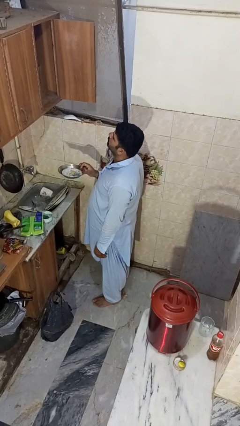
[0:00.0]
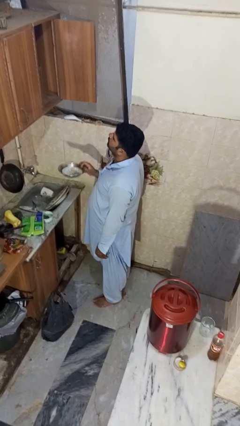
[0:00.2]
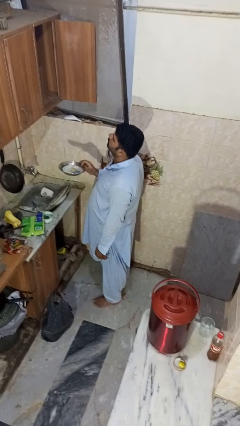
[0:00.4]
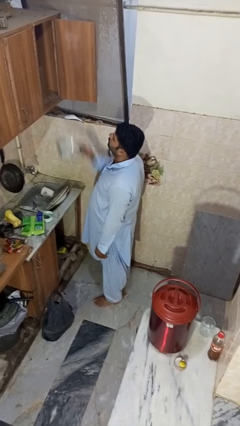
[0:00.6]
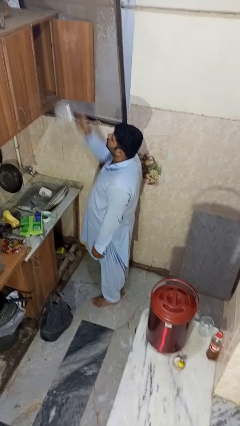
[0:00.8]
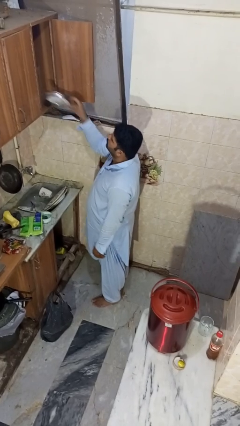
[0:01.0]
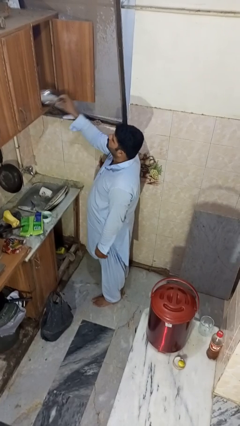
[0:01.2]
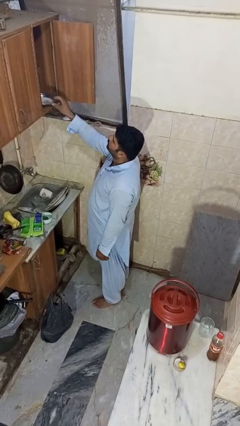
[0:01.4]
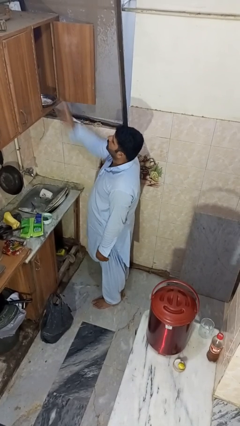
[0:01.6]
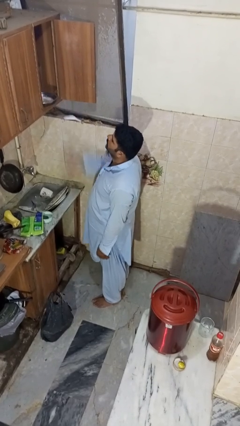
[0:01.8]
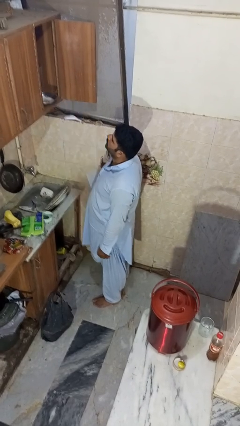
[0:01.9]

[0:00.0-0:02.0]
person puts object in cabinet

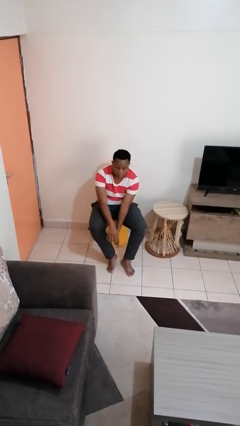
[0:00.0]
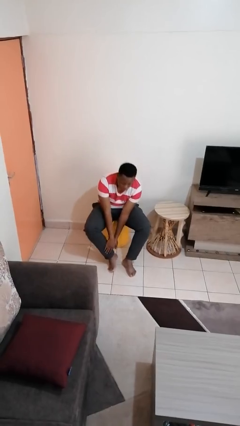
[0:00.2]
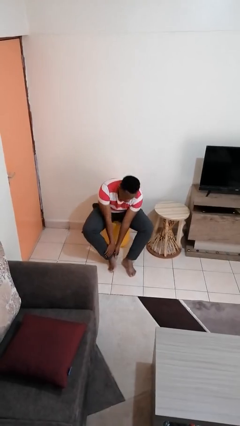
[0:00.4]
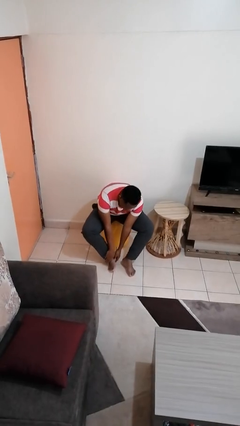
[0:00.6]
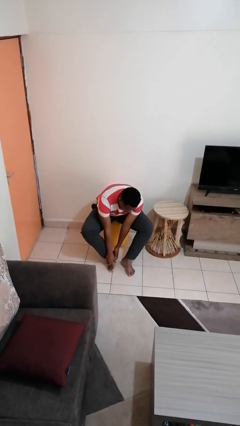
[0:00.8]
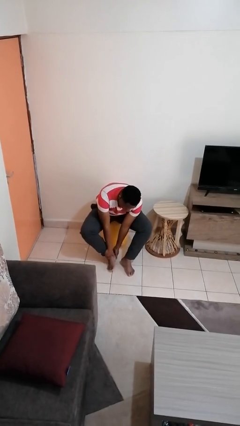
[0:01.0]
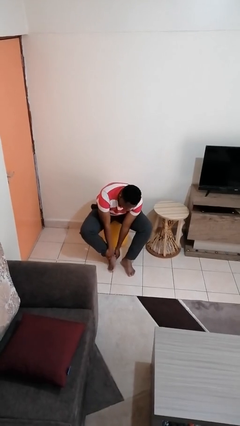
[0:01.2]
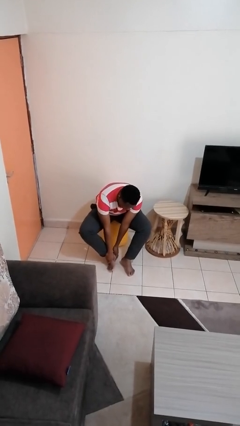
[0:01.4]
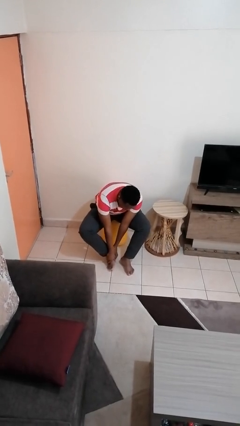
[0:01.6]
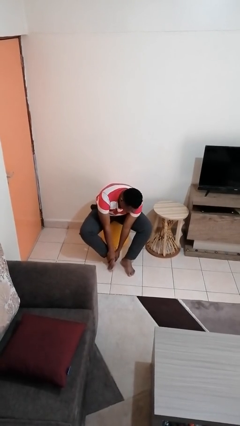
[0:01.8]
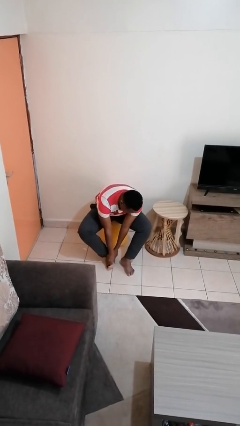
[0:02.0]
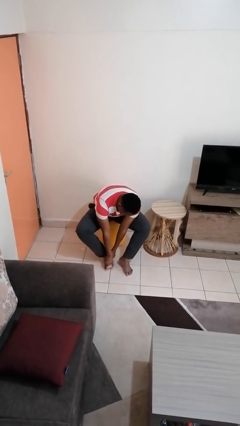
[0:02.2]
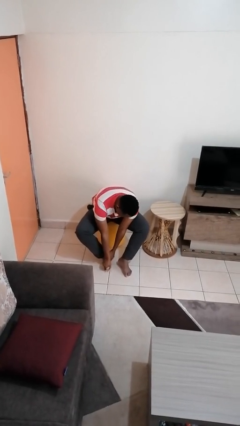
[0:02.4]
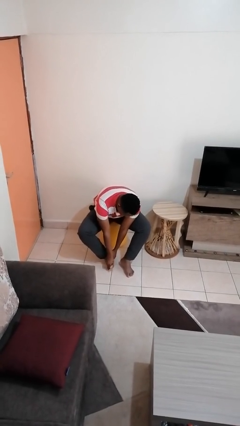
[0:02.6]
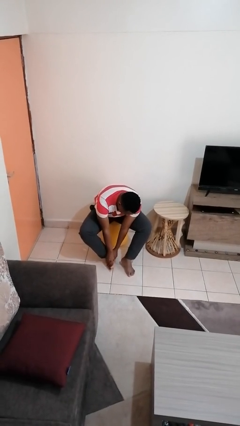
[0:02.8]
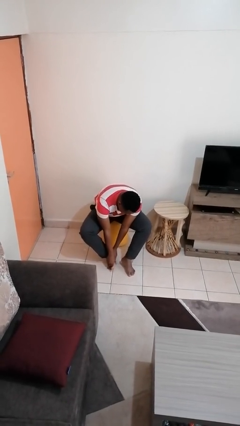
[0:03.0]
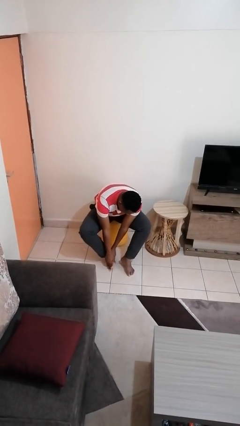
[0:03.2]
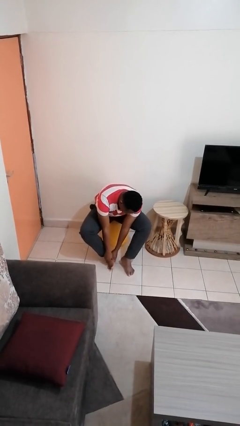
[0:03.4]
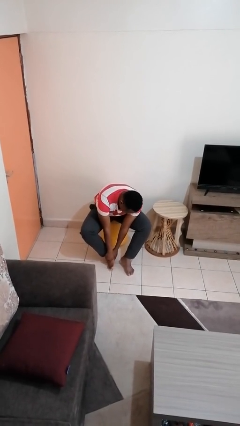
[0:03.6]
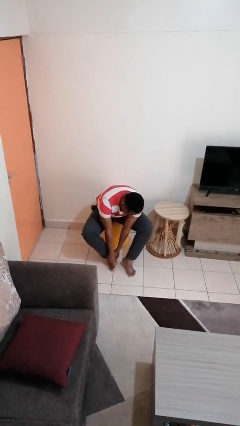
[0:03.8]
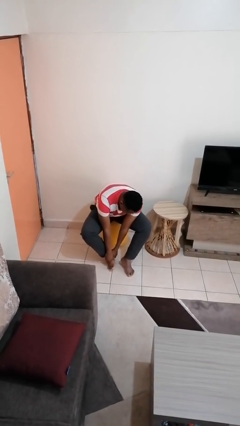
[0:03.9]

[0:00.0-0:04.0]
person rubs foot

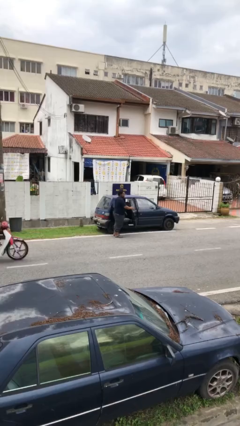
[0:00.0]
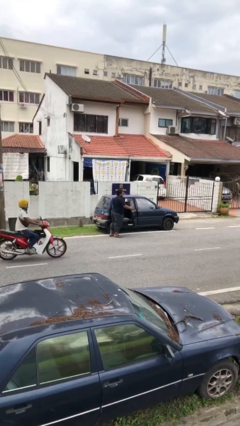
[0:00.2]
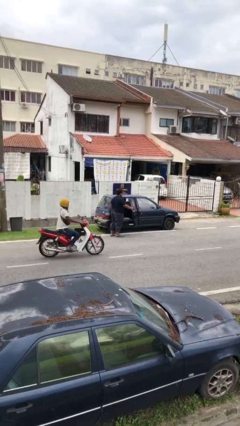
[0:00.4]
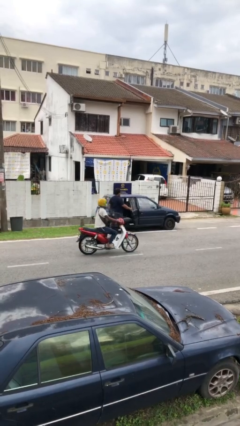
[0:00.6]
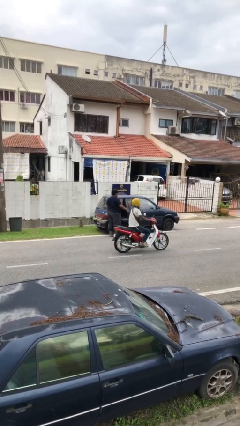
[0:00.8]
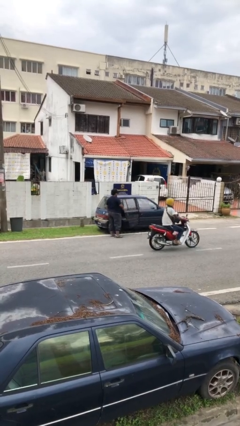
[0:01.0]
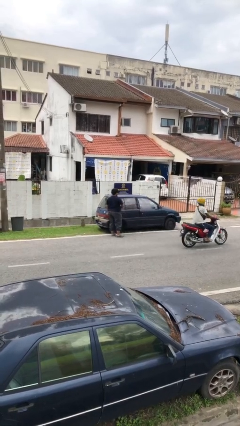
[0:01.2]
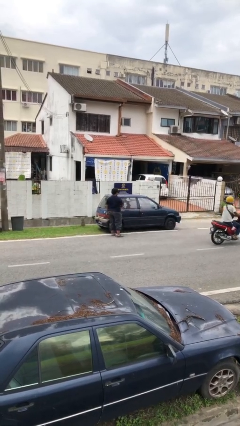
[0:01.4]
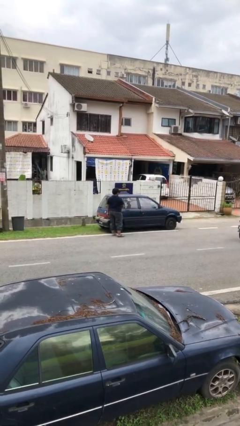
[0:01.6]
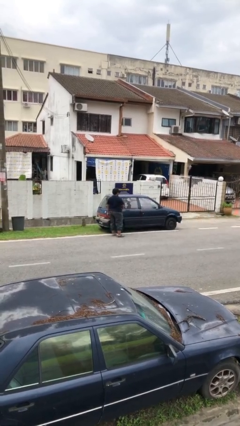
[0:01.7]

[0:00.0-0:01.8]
person closes car door

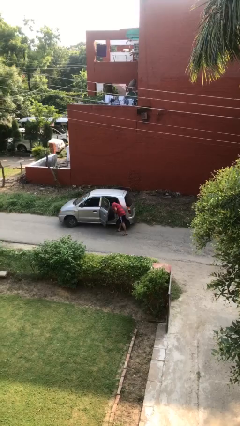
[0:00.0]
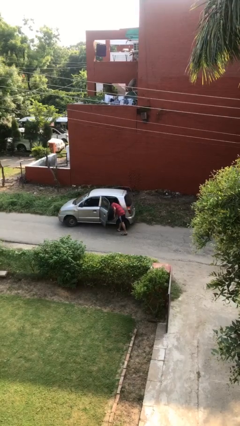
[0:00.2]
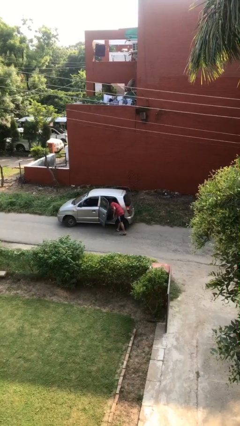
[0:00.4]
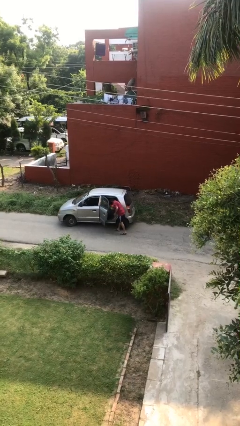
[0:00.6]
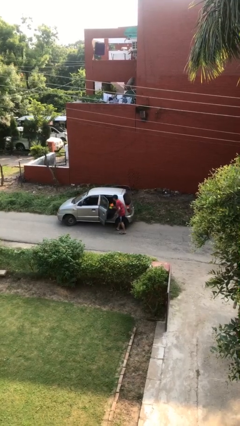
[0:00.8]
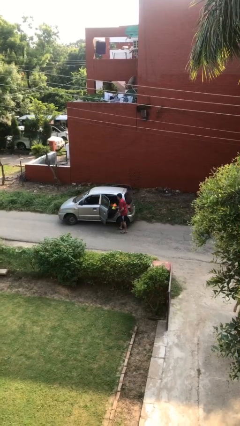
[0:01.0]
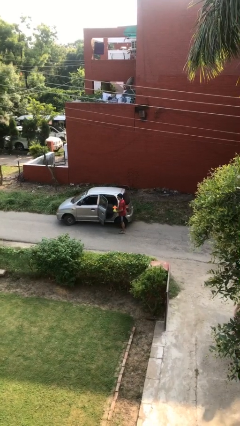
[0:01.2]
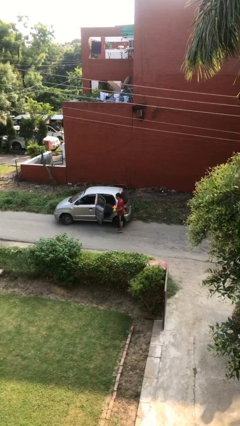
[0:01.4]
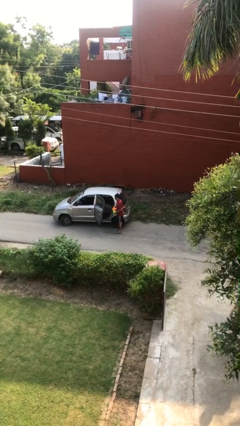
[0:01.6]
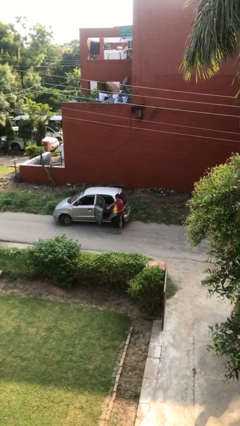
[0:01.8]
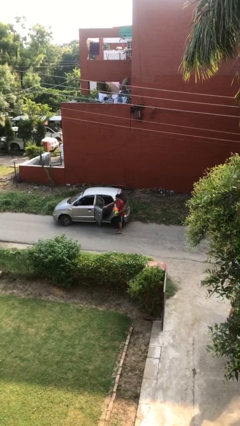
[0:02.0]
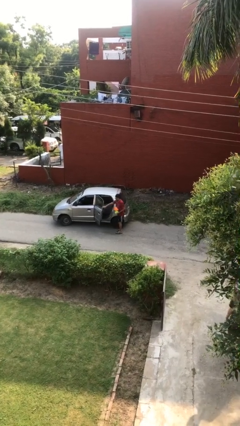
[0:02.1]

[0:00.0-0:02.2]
person unloads car

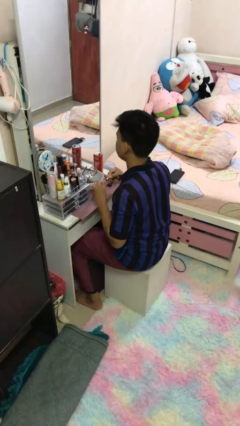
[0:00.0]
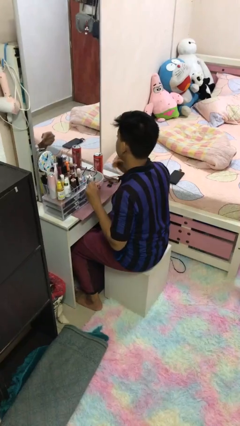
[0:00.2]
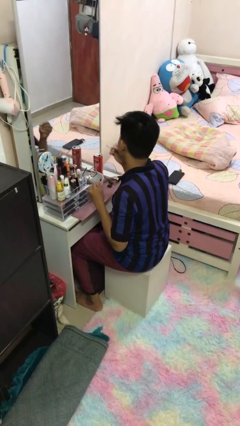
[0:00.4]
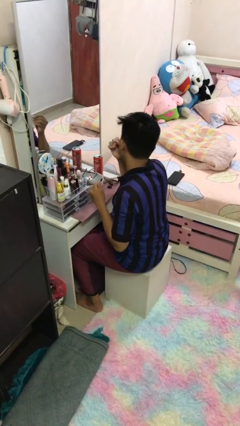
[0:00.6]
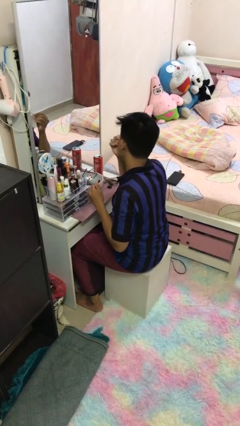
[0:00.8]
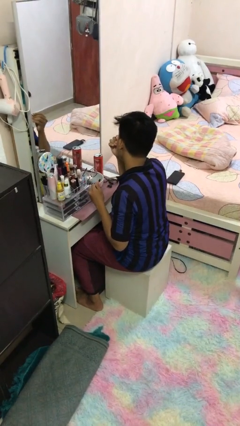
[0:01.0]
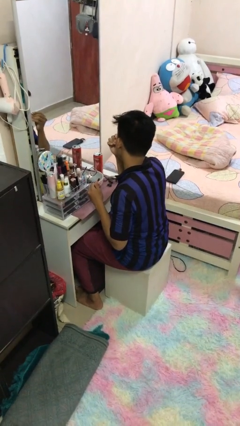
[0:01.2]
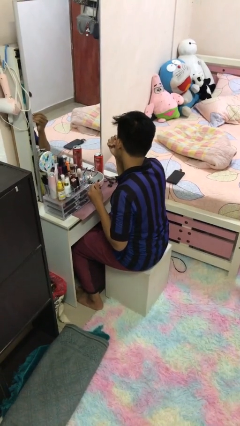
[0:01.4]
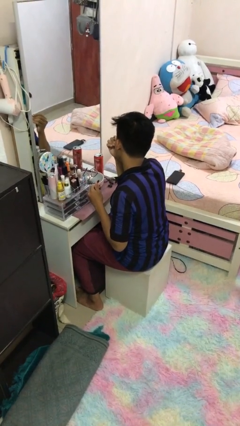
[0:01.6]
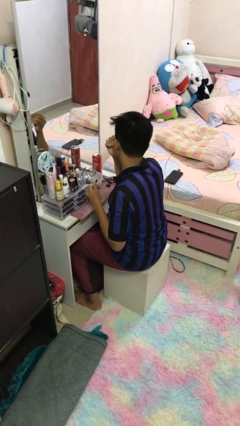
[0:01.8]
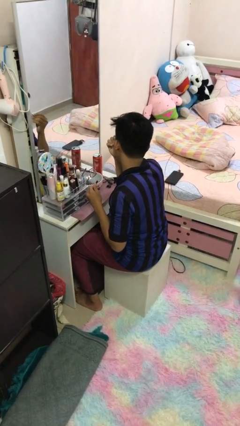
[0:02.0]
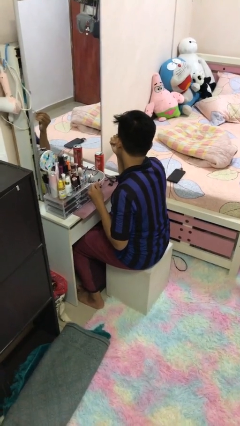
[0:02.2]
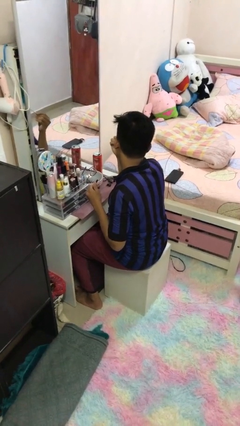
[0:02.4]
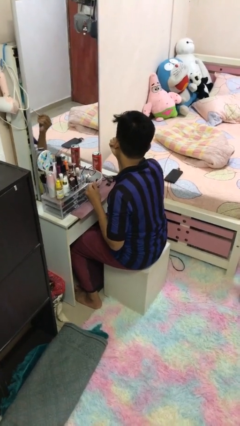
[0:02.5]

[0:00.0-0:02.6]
person applies eye makeup

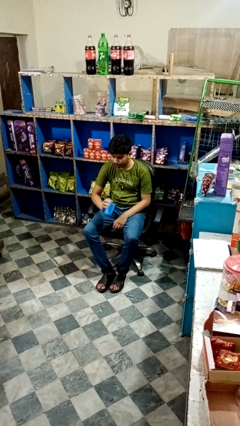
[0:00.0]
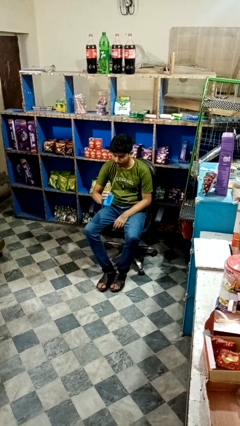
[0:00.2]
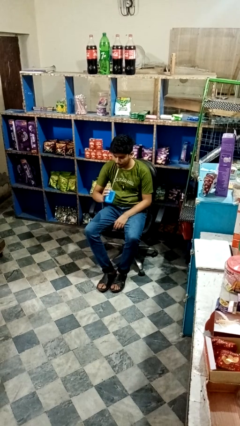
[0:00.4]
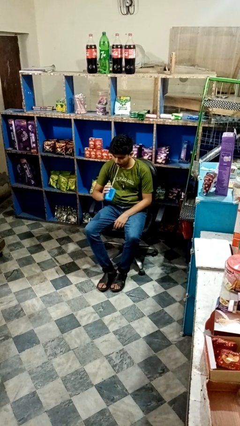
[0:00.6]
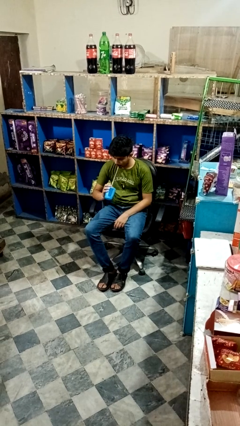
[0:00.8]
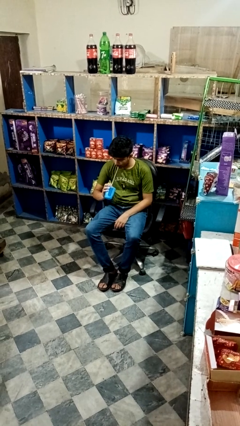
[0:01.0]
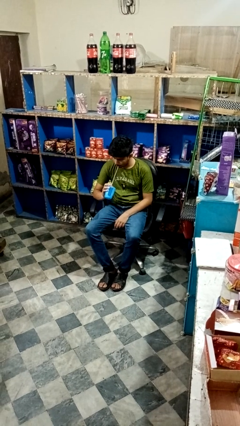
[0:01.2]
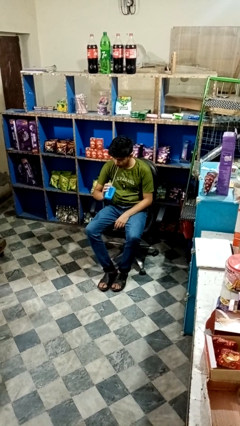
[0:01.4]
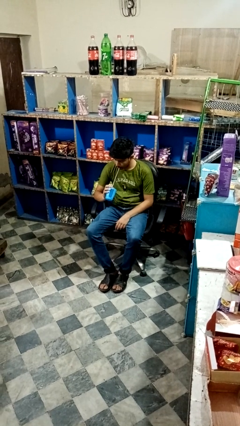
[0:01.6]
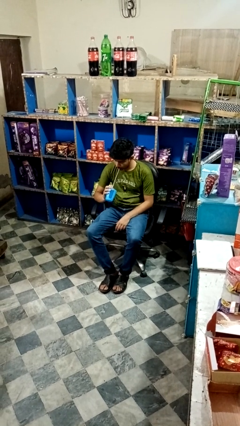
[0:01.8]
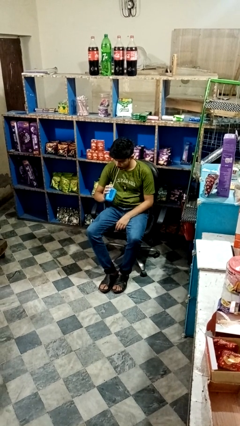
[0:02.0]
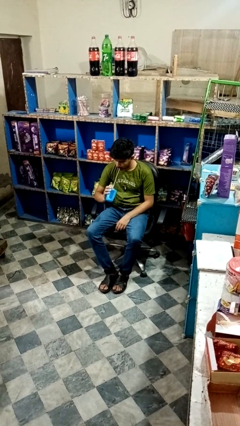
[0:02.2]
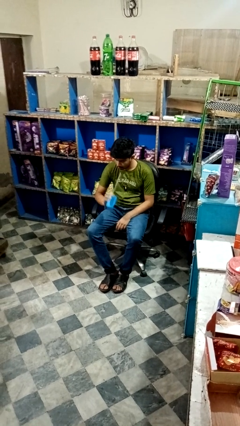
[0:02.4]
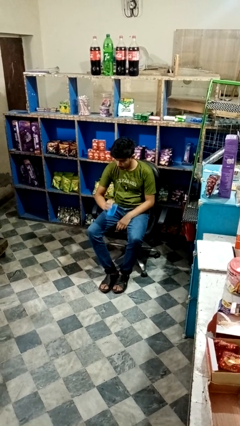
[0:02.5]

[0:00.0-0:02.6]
person drinks from straw

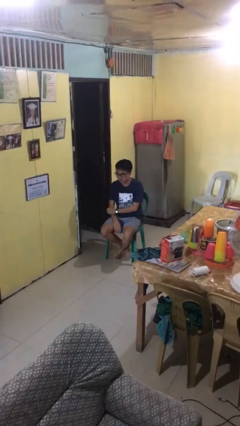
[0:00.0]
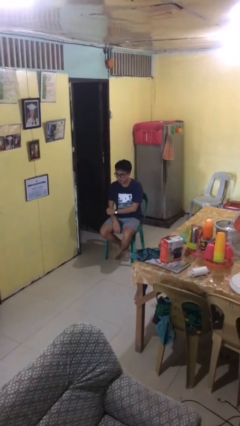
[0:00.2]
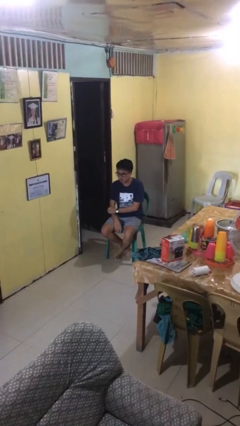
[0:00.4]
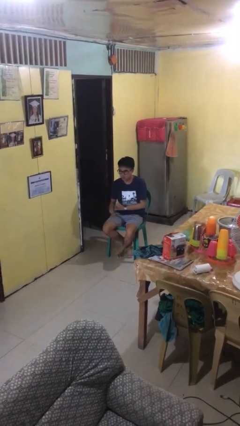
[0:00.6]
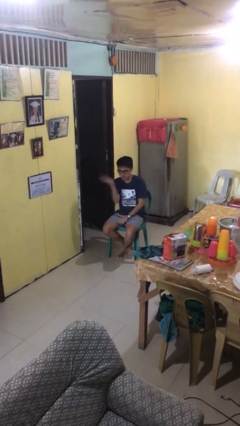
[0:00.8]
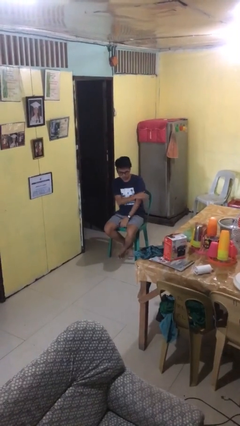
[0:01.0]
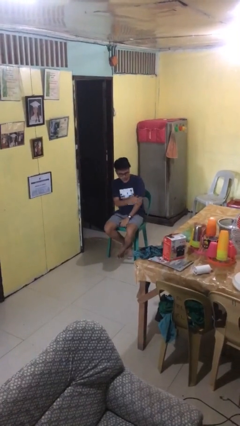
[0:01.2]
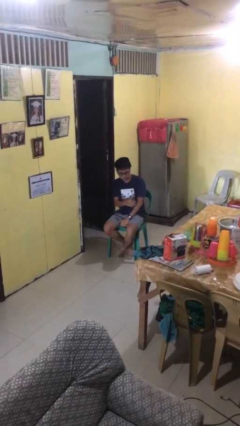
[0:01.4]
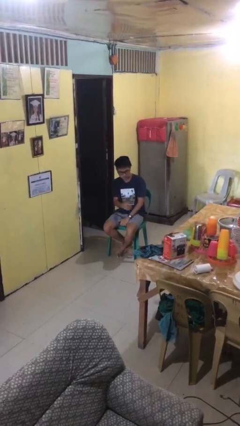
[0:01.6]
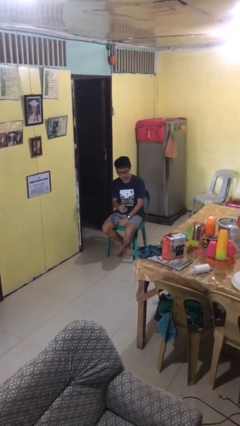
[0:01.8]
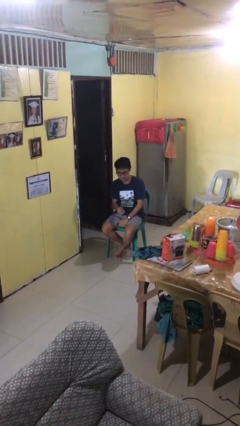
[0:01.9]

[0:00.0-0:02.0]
person swats bug
